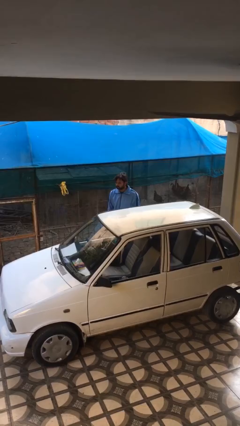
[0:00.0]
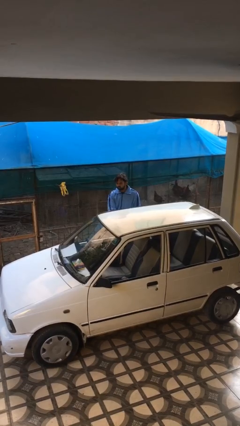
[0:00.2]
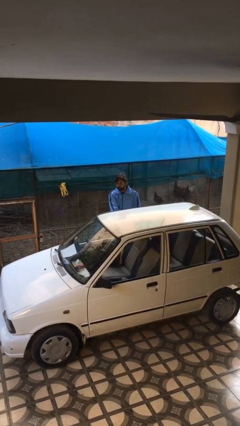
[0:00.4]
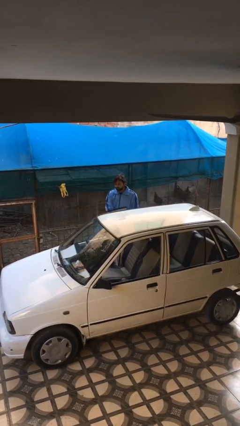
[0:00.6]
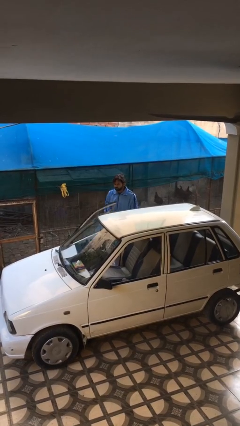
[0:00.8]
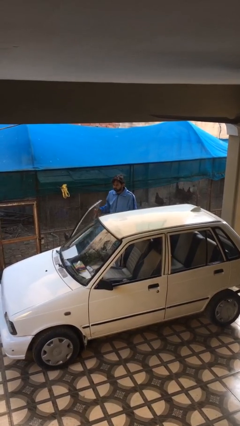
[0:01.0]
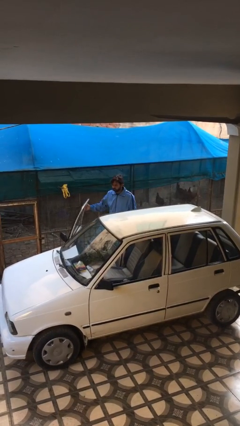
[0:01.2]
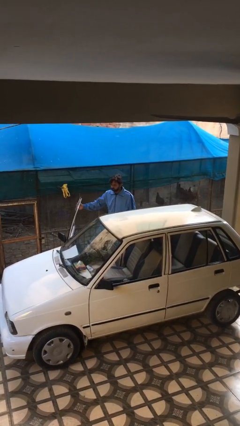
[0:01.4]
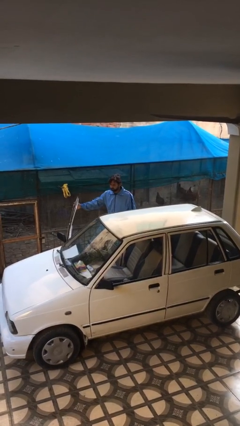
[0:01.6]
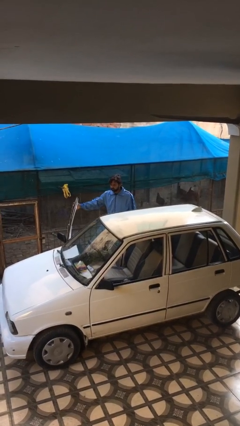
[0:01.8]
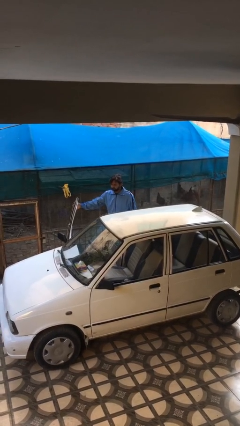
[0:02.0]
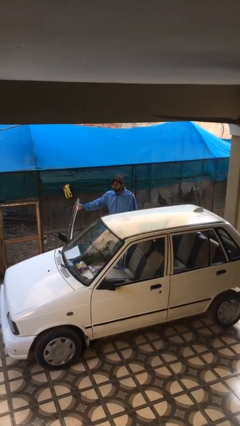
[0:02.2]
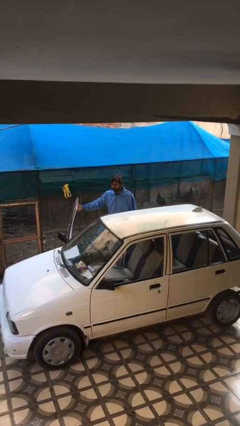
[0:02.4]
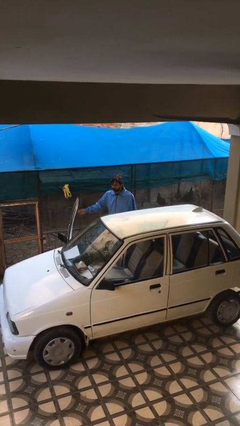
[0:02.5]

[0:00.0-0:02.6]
person opens car door

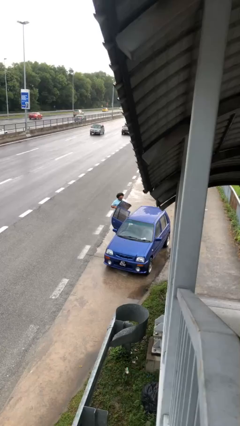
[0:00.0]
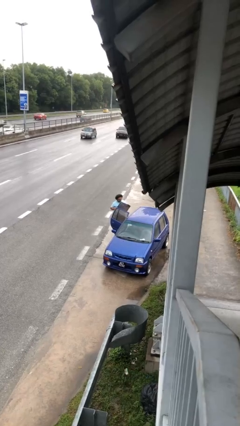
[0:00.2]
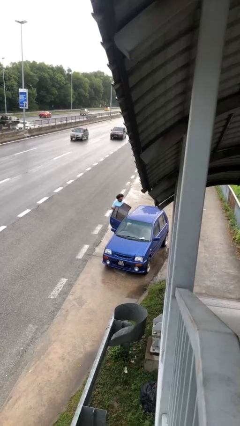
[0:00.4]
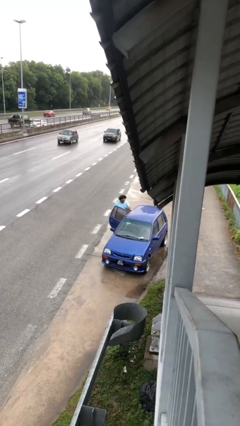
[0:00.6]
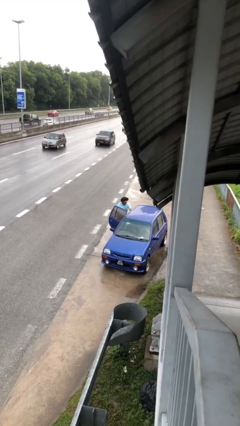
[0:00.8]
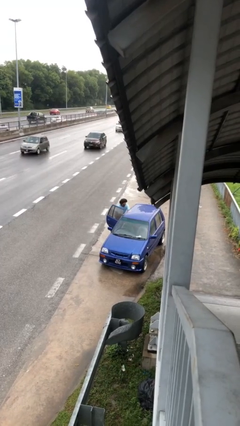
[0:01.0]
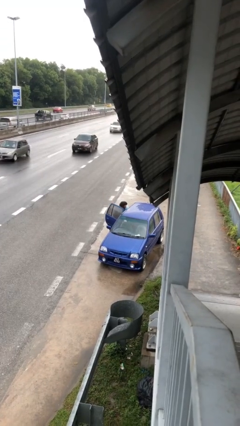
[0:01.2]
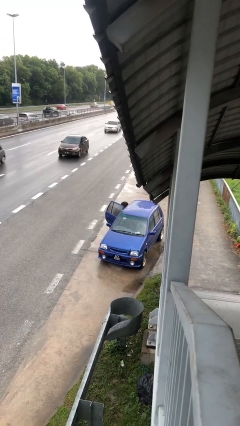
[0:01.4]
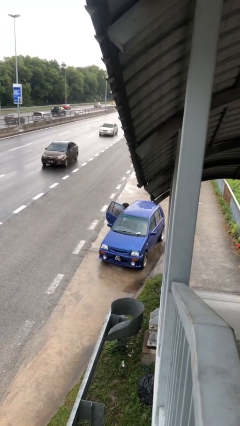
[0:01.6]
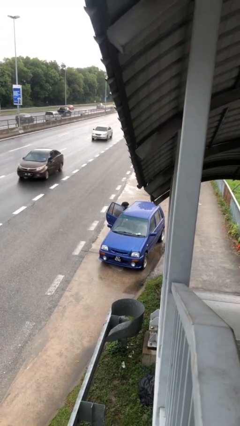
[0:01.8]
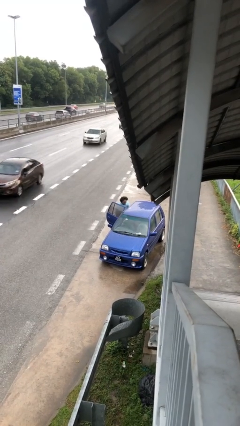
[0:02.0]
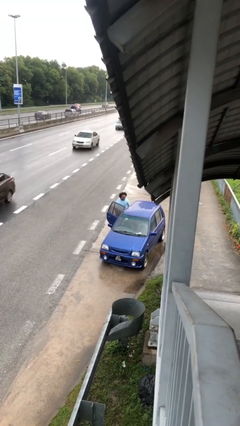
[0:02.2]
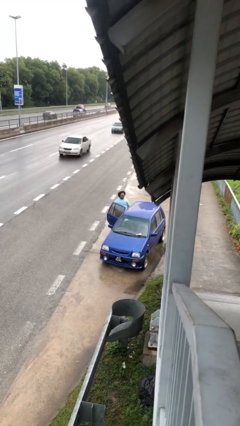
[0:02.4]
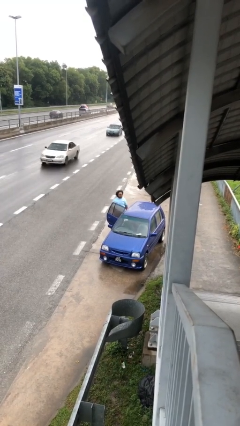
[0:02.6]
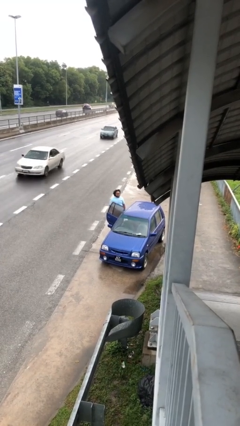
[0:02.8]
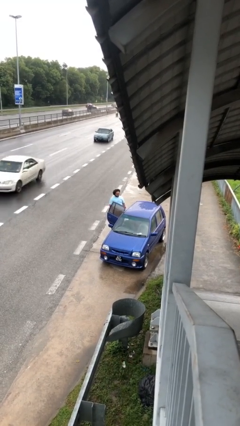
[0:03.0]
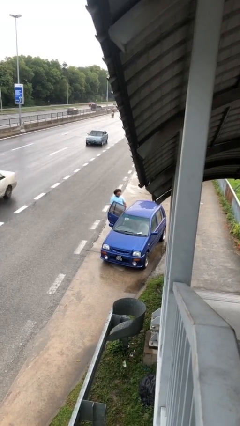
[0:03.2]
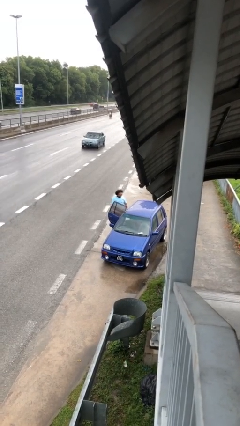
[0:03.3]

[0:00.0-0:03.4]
person loads car

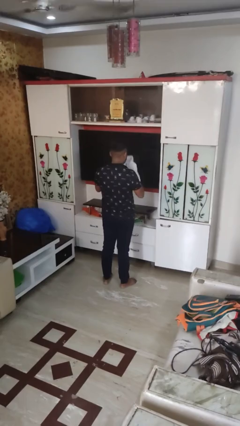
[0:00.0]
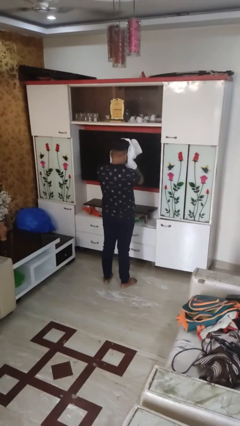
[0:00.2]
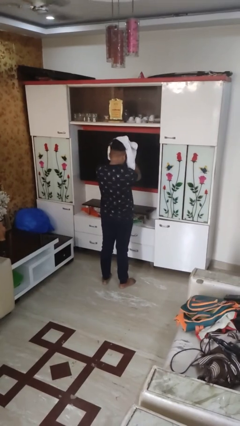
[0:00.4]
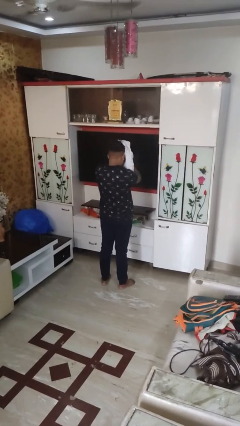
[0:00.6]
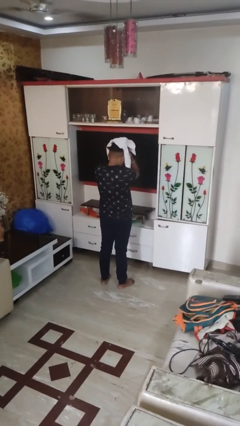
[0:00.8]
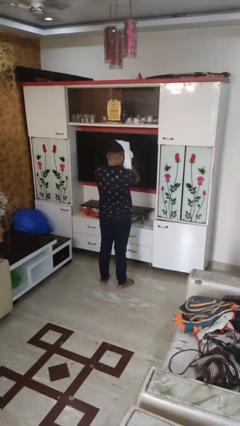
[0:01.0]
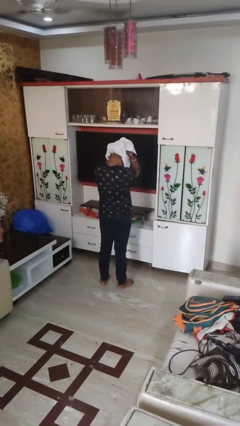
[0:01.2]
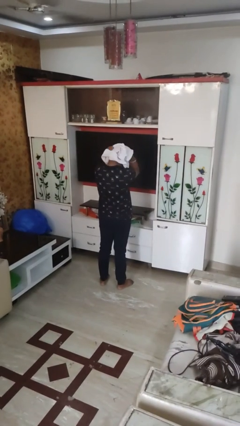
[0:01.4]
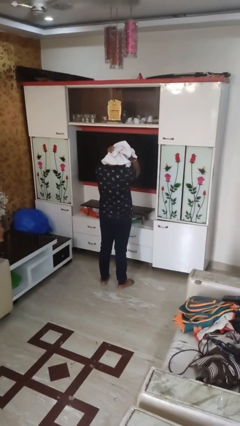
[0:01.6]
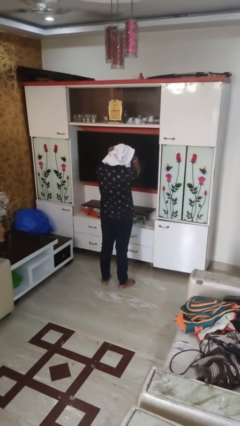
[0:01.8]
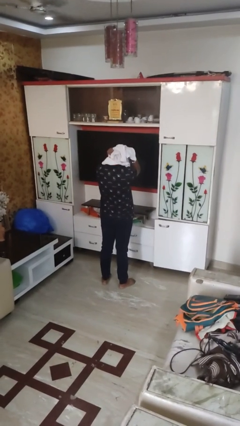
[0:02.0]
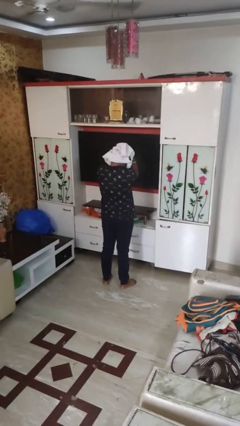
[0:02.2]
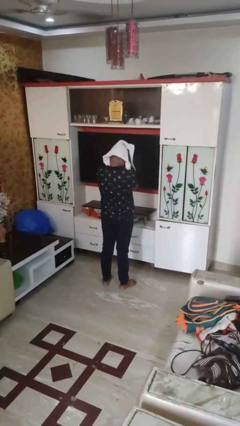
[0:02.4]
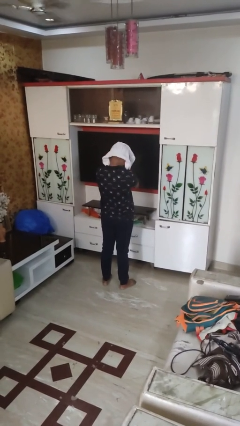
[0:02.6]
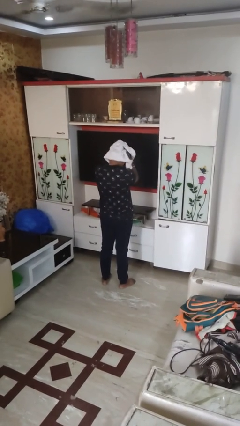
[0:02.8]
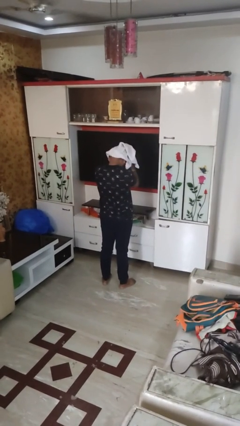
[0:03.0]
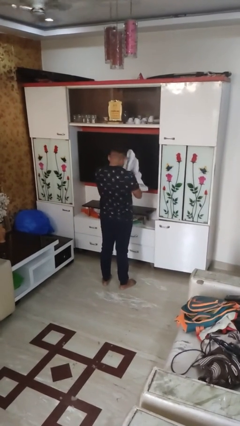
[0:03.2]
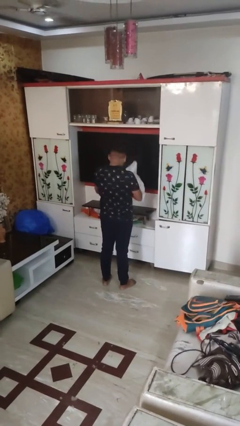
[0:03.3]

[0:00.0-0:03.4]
person dries hair with towel

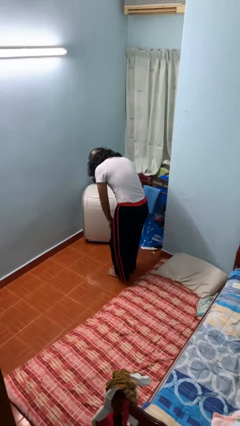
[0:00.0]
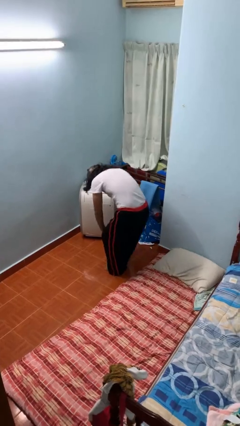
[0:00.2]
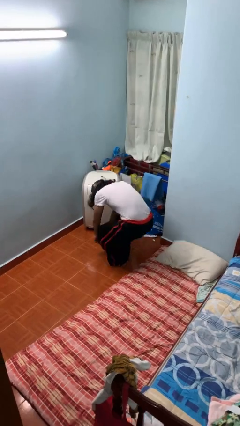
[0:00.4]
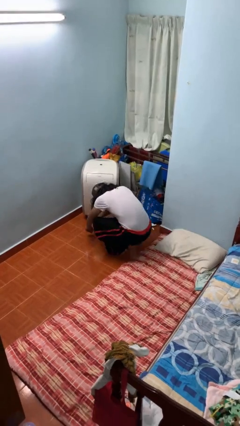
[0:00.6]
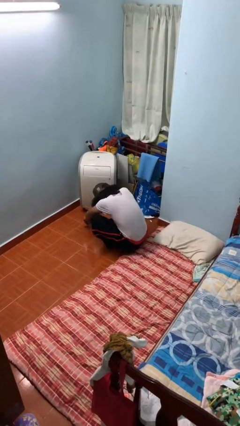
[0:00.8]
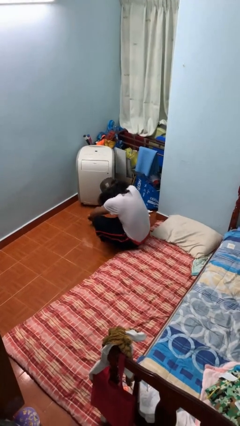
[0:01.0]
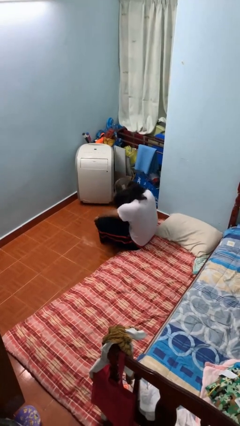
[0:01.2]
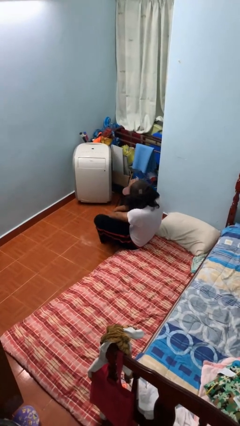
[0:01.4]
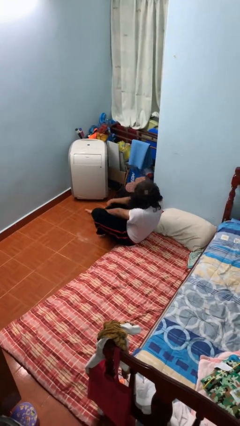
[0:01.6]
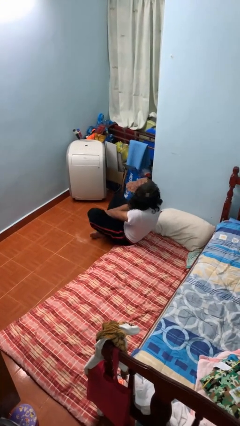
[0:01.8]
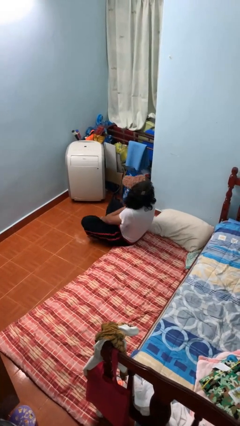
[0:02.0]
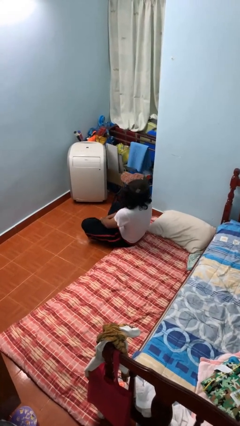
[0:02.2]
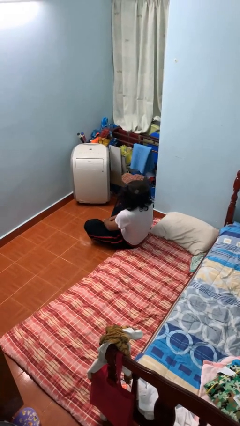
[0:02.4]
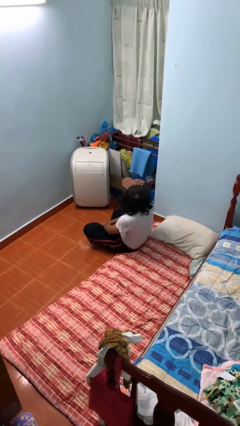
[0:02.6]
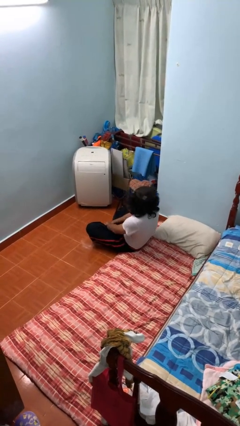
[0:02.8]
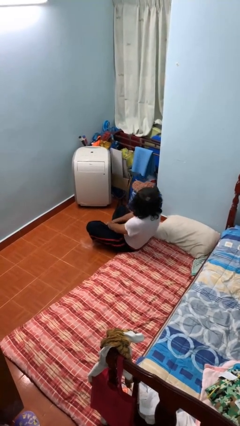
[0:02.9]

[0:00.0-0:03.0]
person sits crisscross

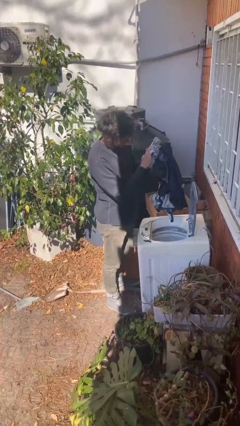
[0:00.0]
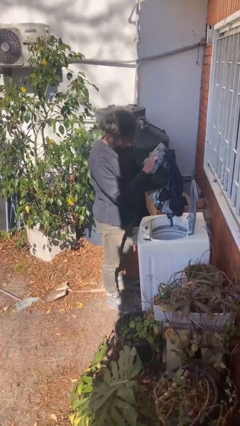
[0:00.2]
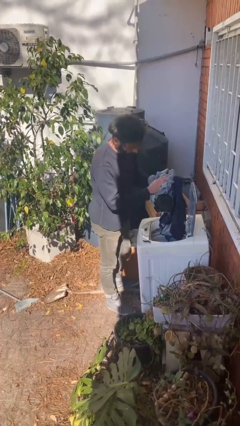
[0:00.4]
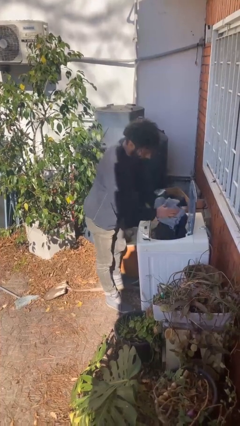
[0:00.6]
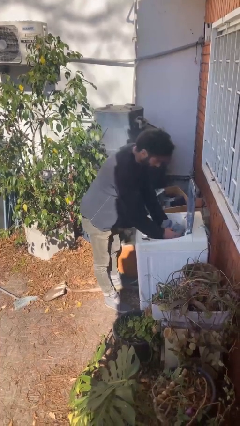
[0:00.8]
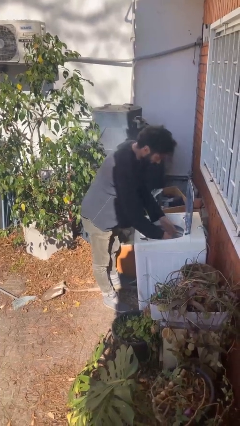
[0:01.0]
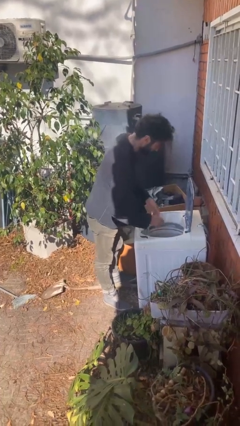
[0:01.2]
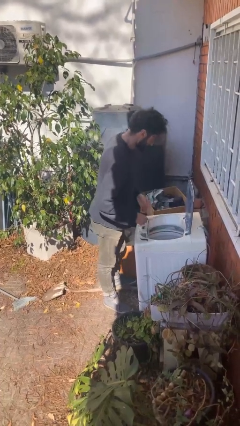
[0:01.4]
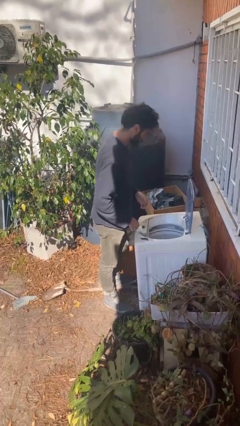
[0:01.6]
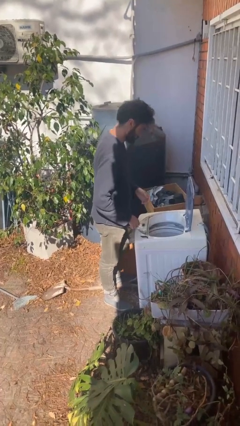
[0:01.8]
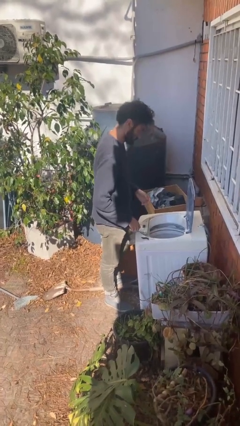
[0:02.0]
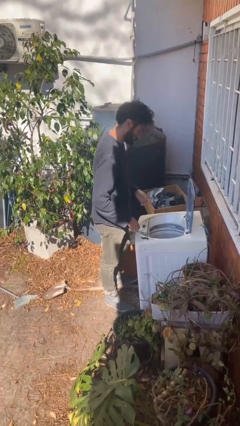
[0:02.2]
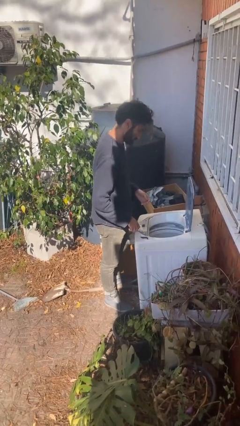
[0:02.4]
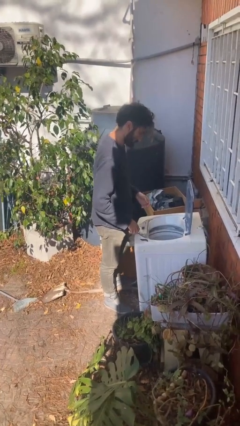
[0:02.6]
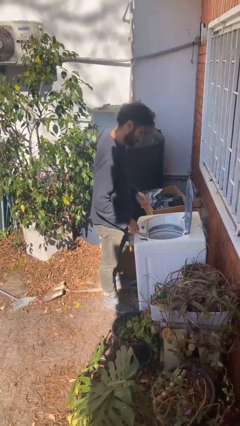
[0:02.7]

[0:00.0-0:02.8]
person loads clotheswasher

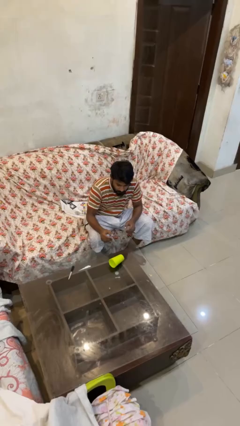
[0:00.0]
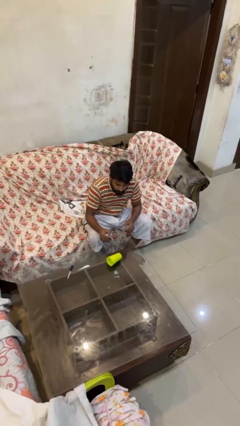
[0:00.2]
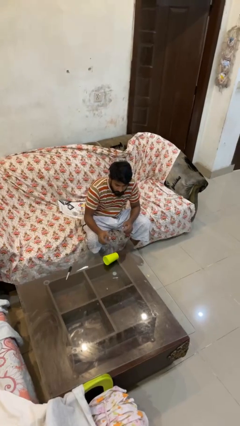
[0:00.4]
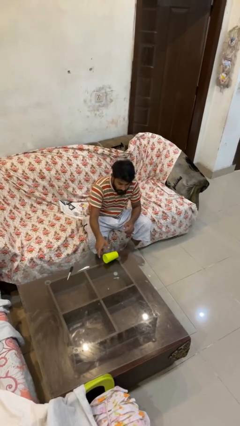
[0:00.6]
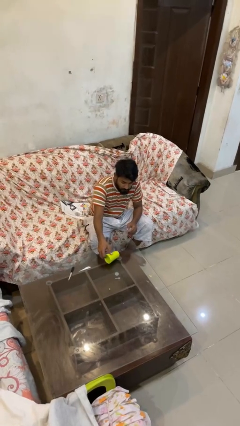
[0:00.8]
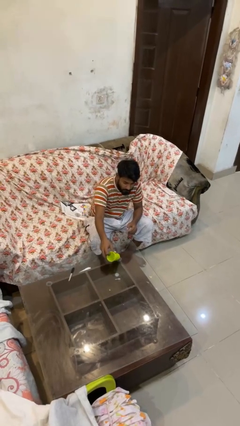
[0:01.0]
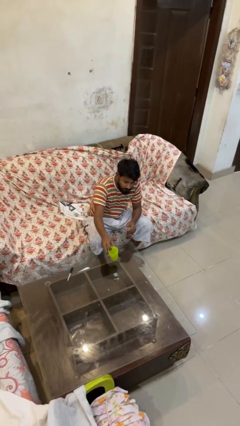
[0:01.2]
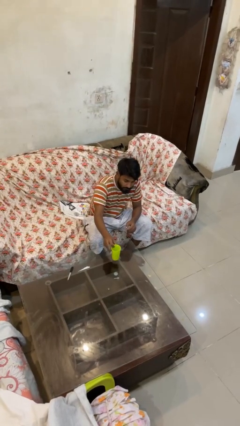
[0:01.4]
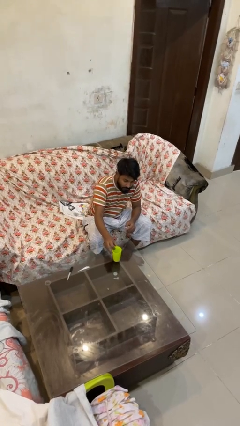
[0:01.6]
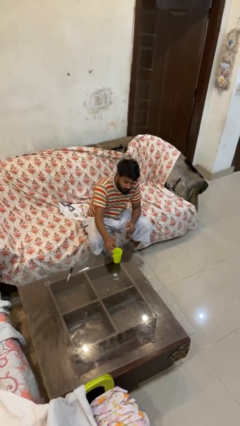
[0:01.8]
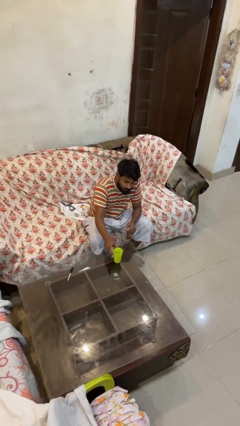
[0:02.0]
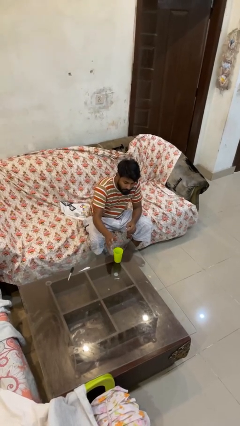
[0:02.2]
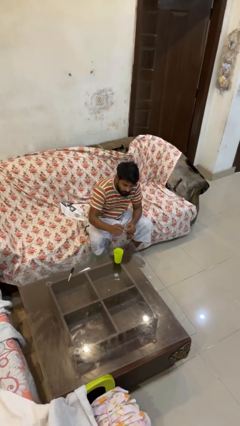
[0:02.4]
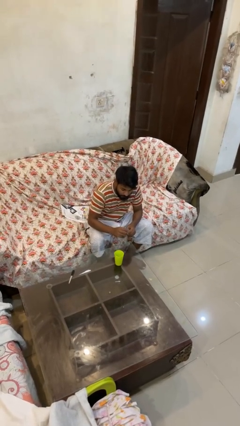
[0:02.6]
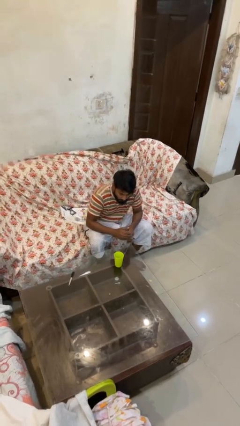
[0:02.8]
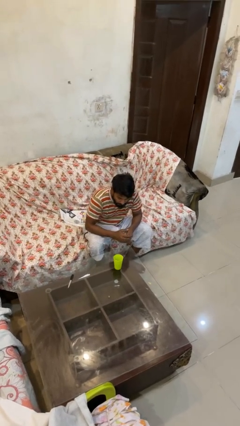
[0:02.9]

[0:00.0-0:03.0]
person sets upright glass
